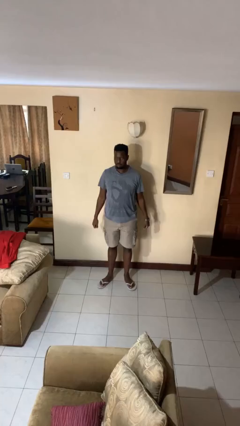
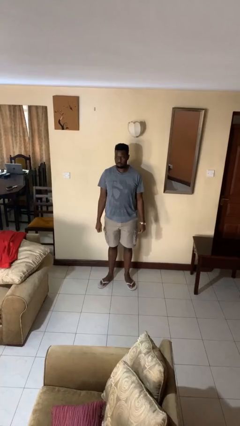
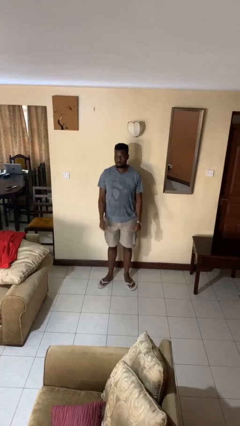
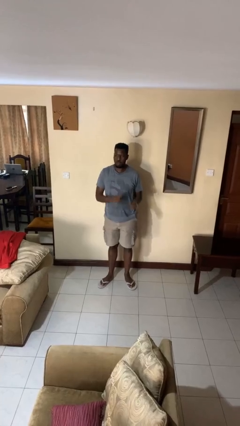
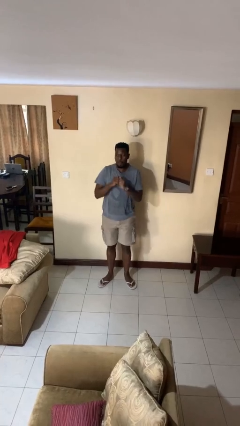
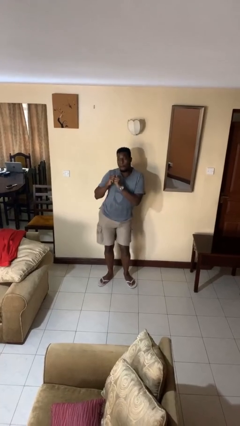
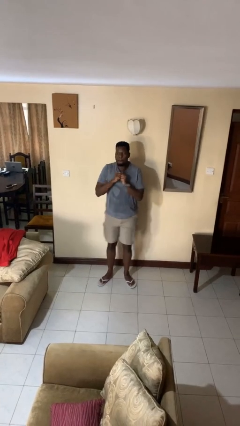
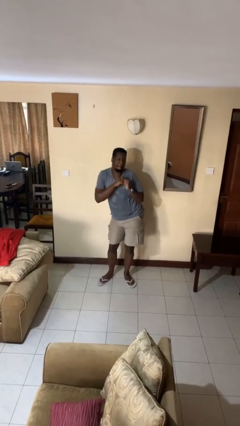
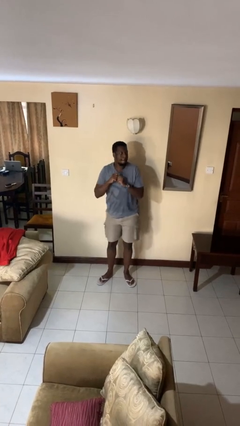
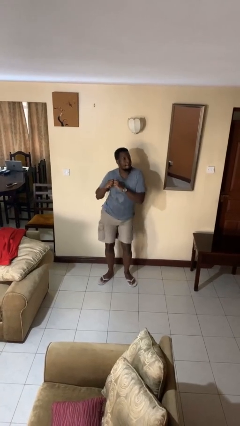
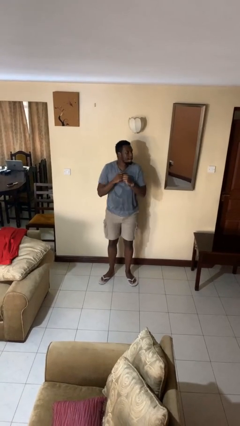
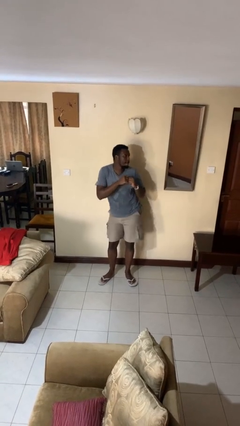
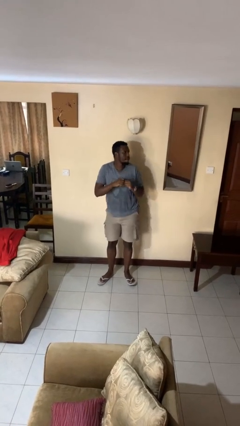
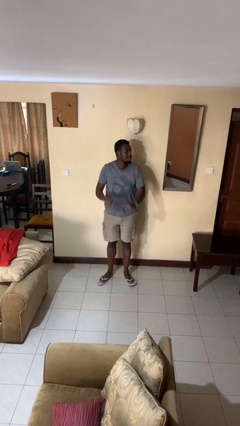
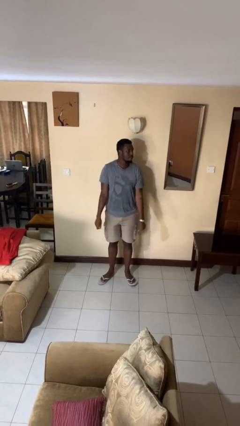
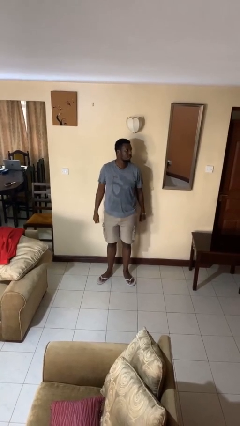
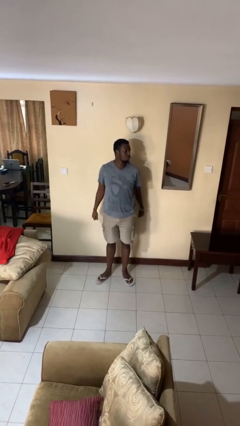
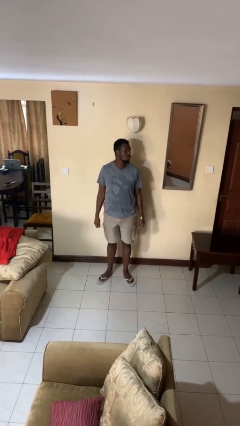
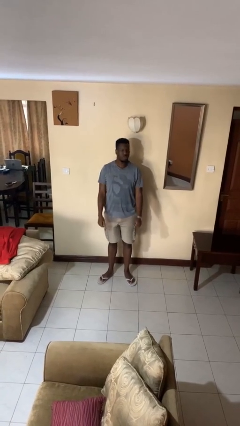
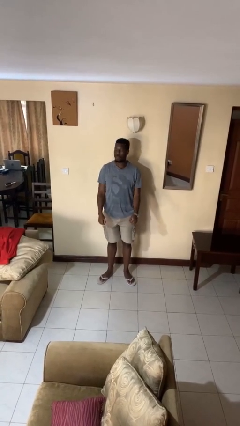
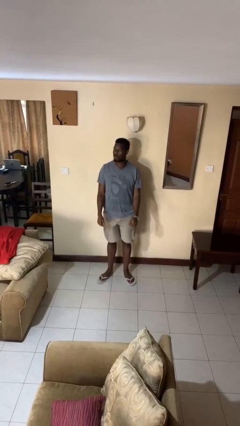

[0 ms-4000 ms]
person wiggles hips

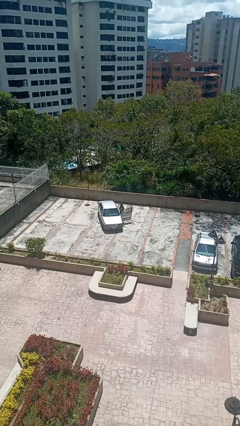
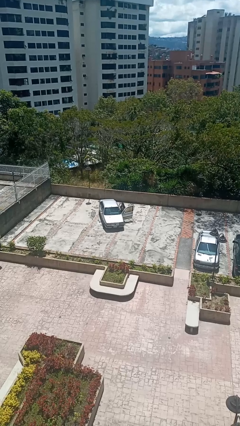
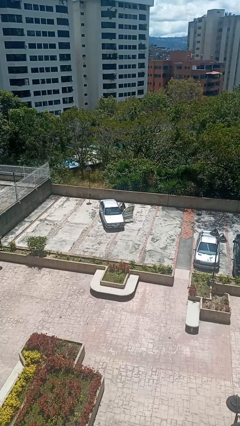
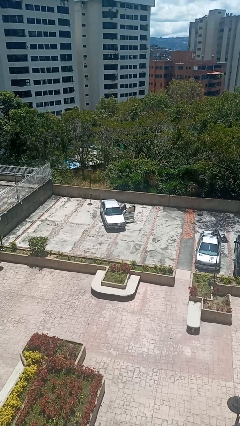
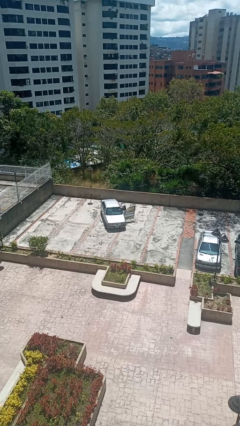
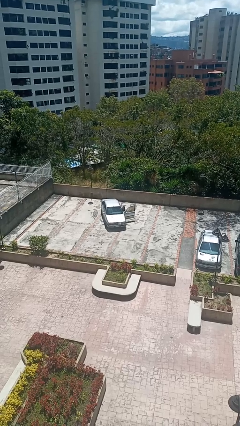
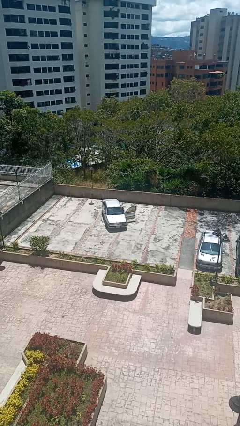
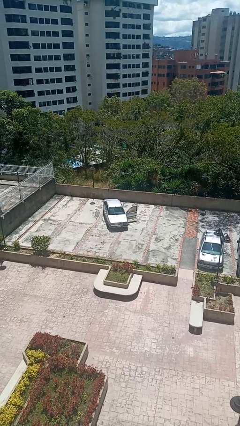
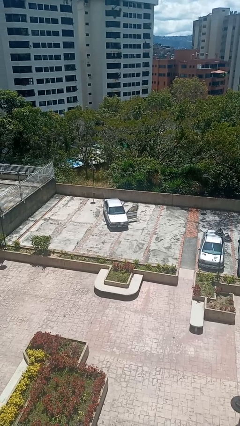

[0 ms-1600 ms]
person enters car

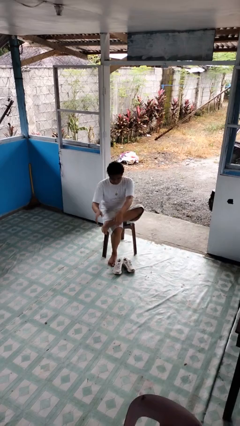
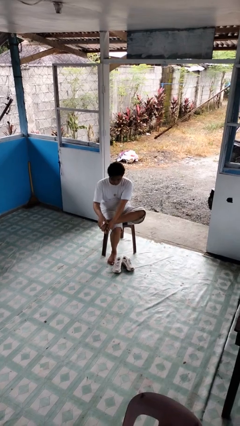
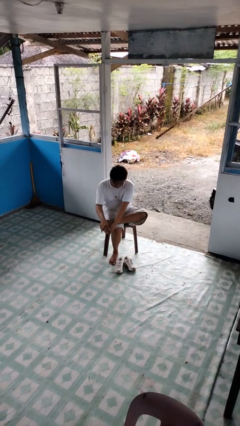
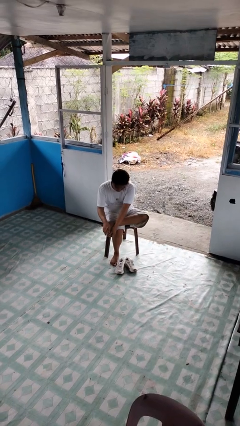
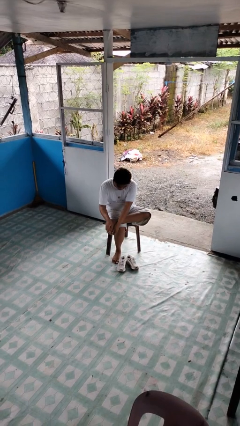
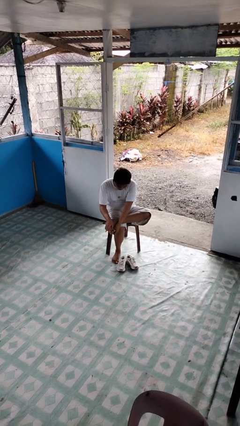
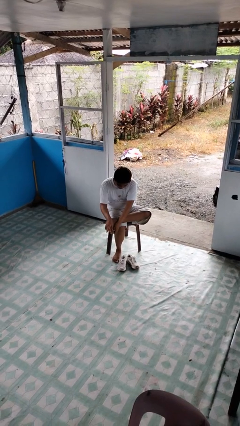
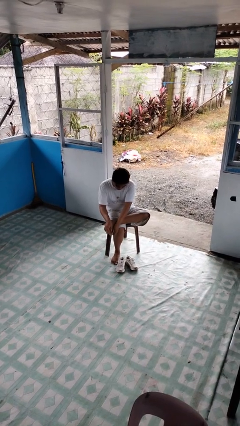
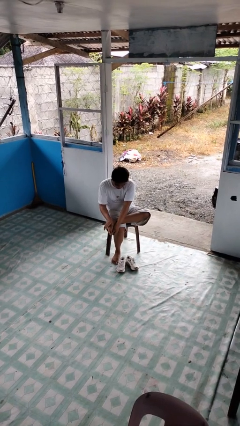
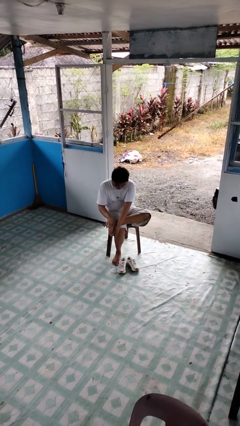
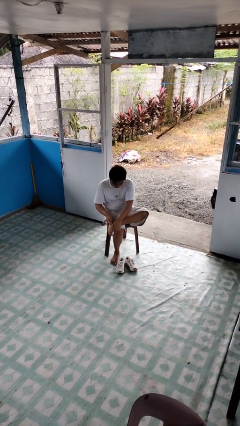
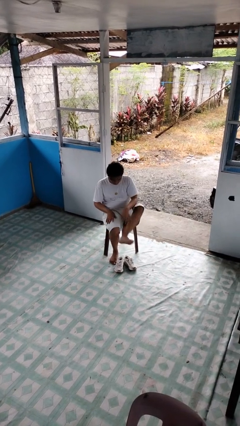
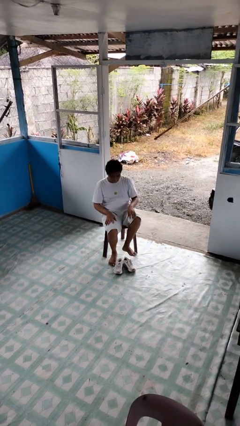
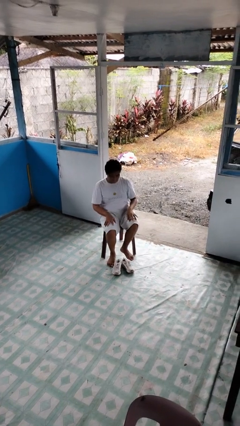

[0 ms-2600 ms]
person rubs foot

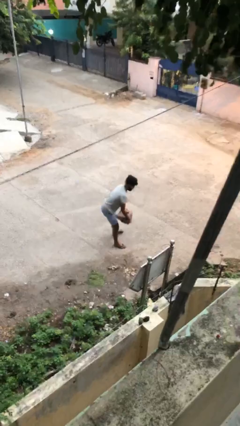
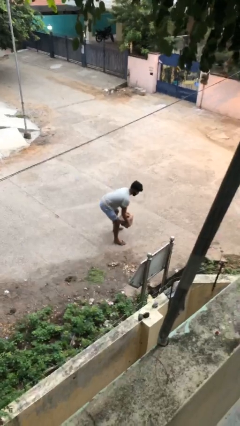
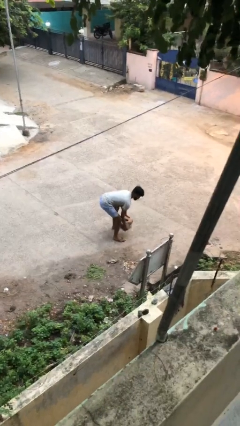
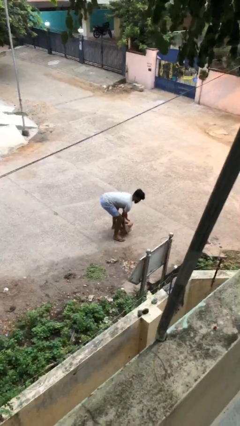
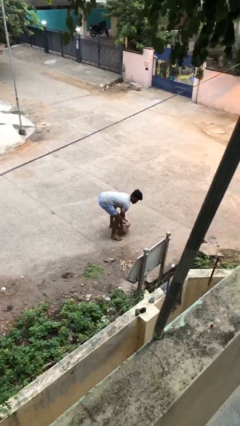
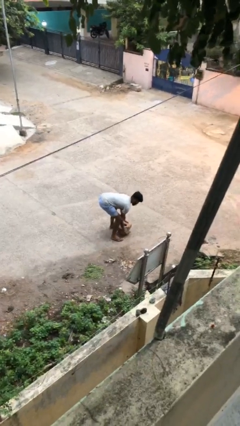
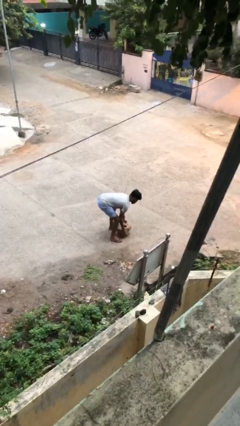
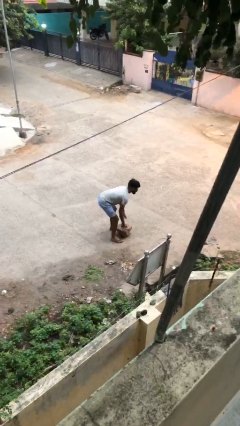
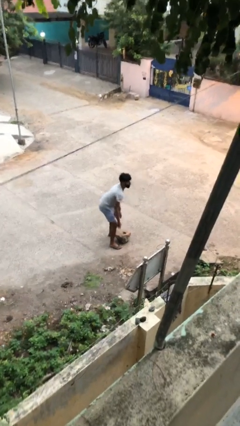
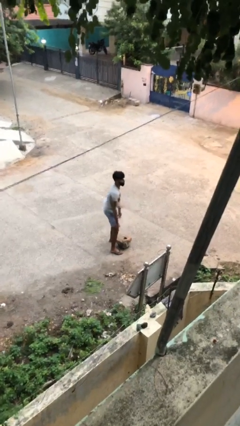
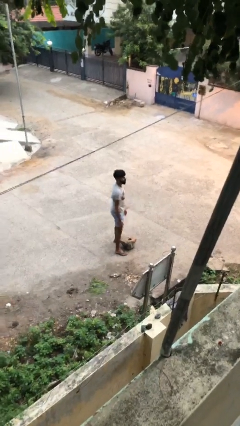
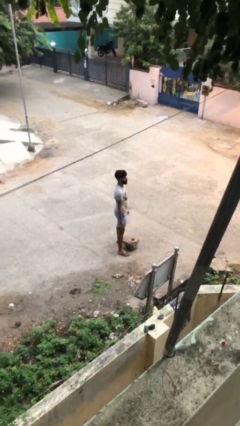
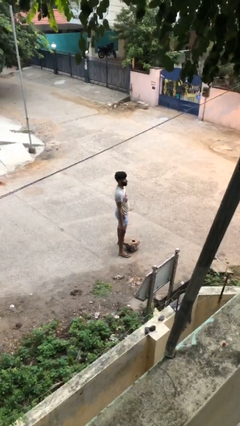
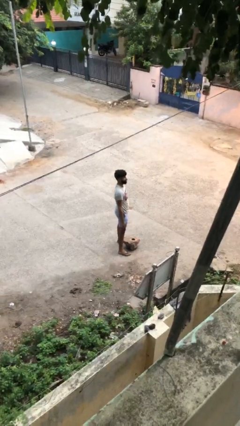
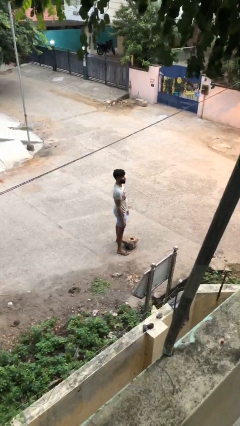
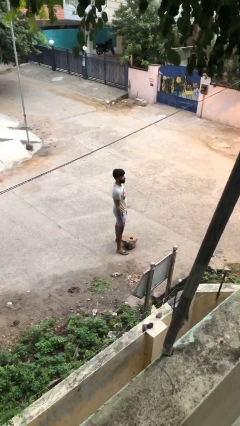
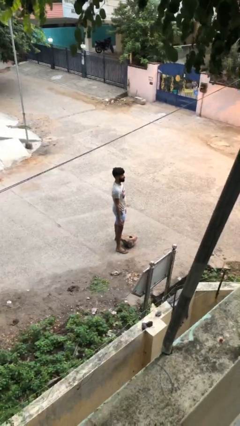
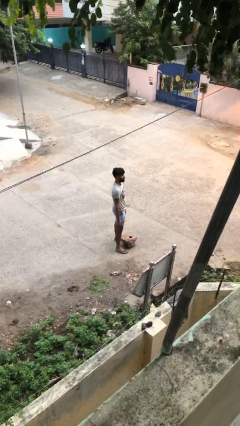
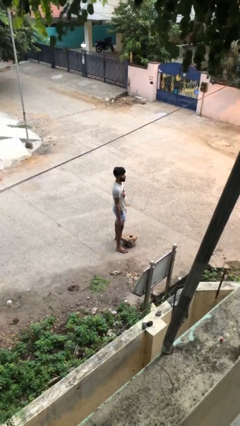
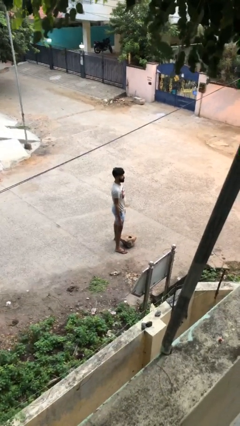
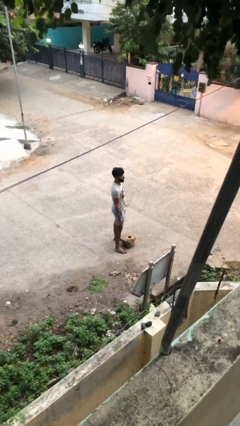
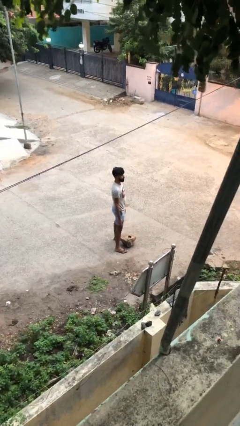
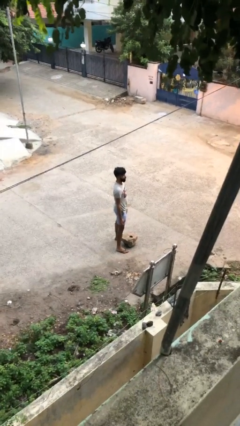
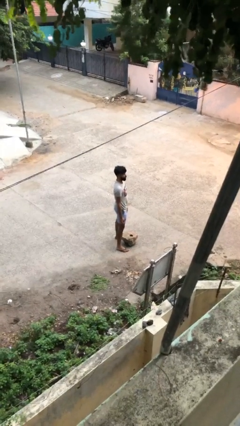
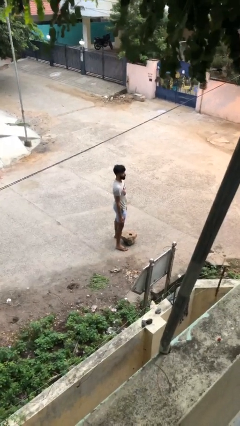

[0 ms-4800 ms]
person puts down object on floor

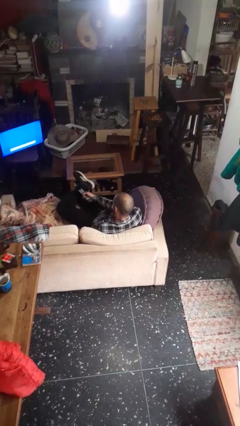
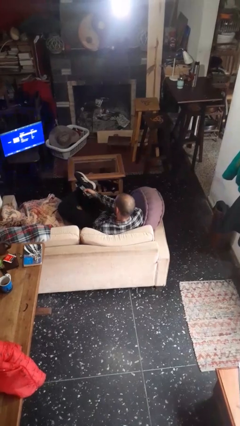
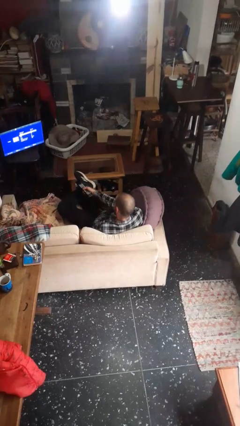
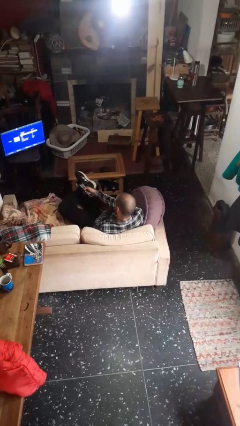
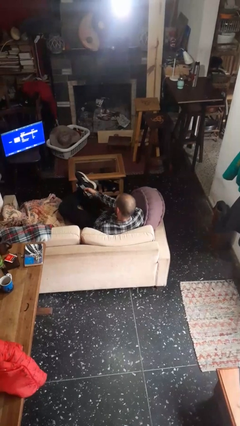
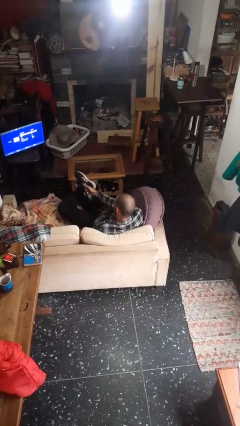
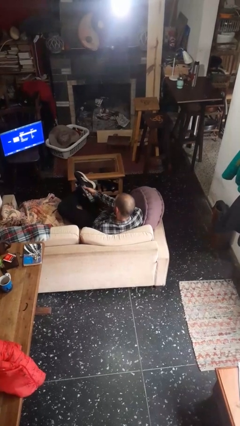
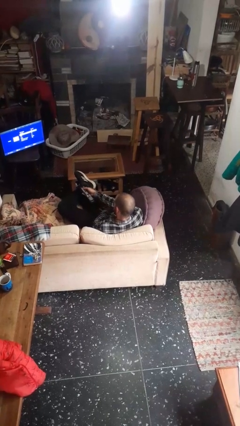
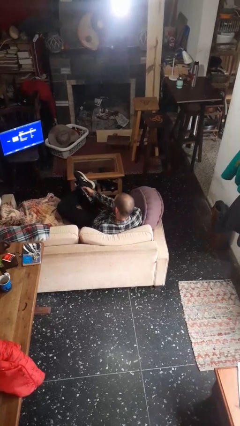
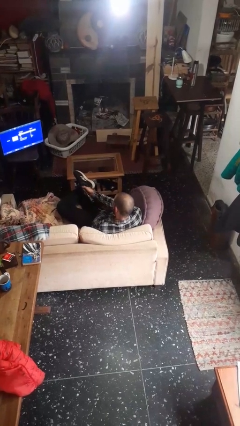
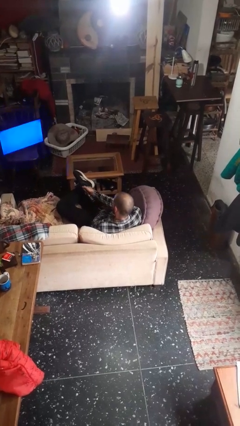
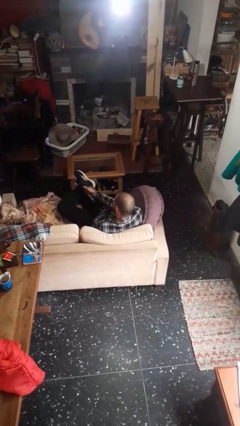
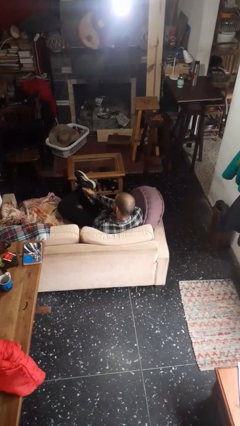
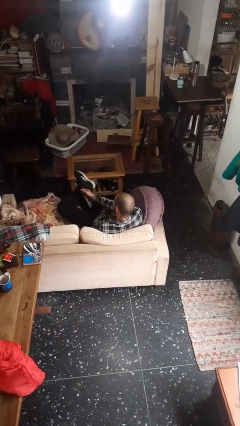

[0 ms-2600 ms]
person uses television remote

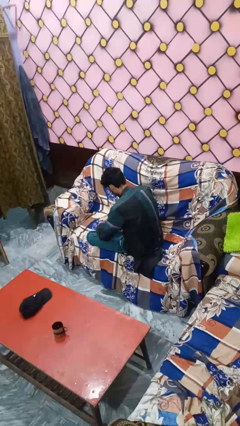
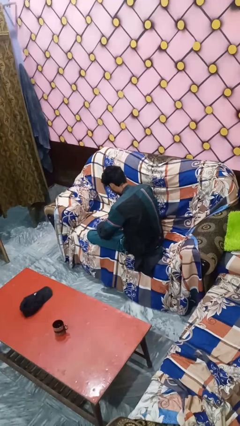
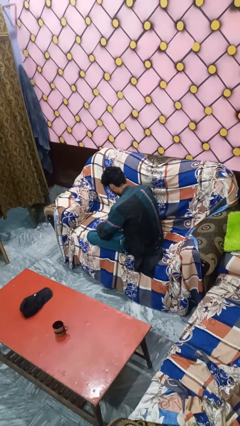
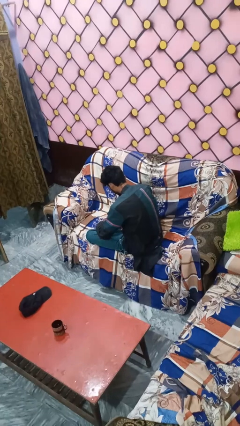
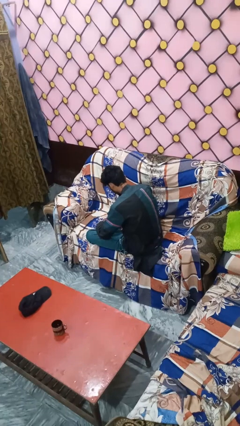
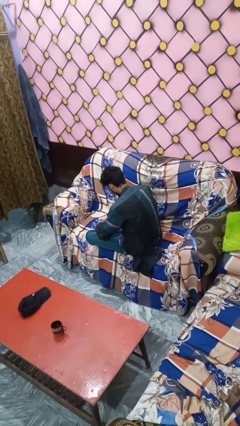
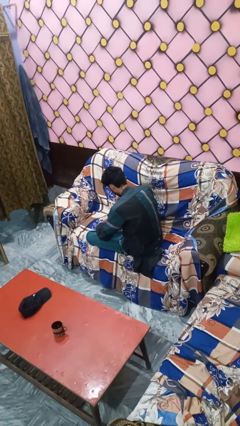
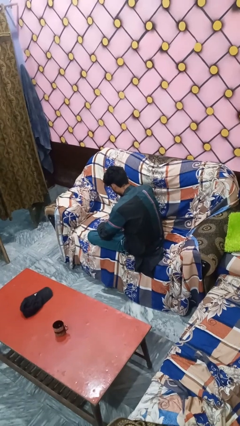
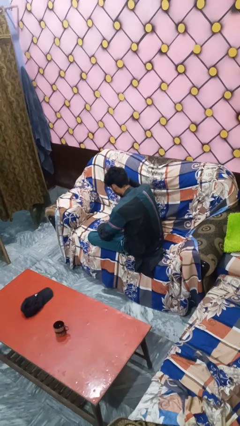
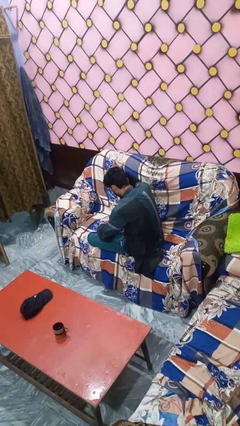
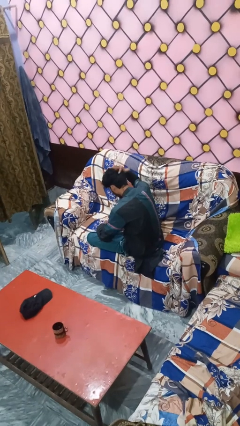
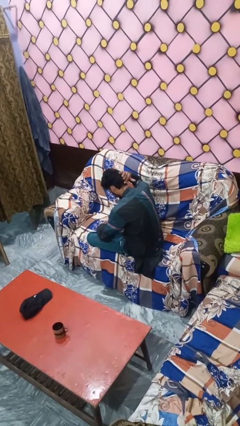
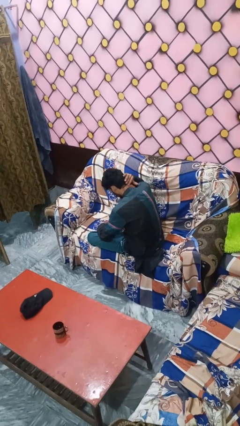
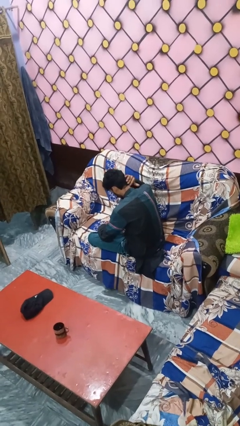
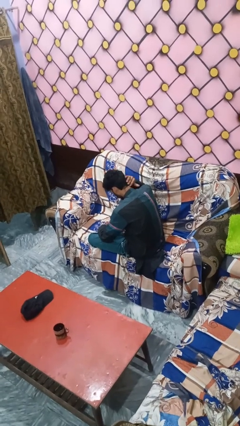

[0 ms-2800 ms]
person pats head
